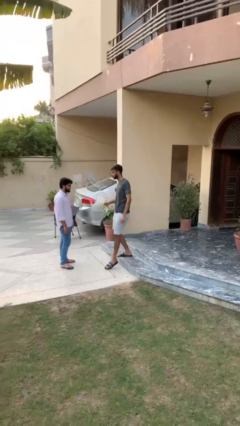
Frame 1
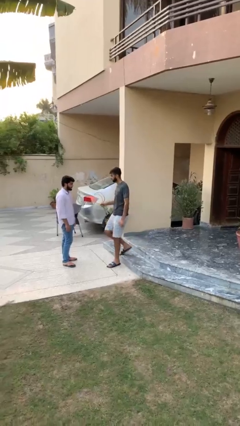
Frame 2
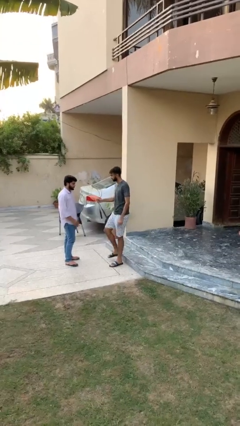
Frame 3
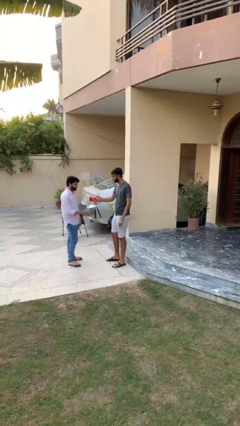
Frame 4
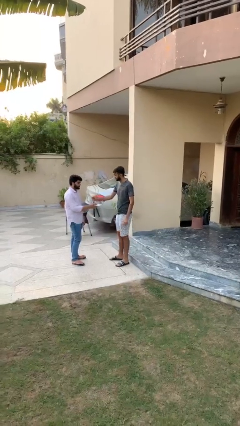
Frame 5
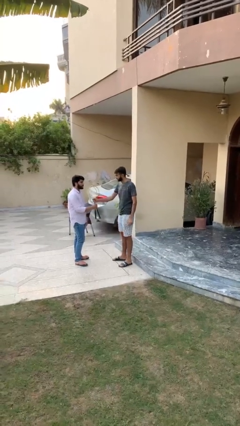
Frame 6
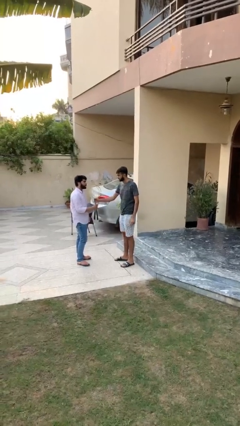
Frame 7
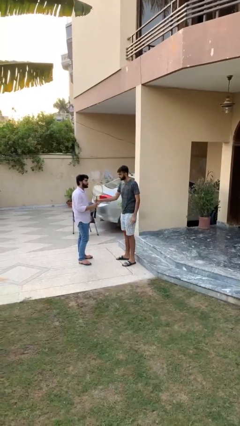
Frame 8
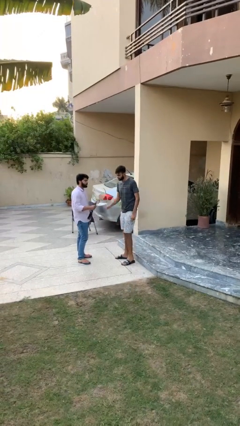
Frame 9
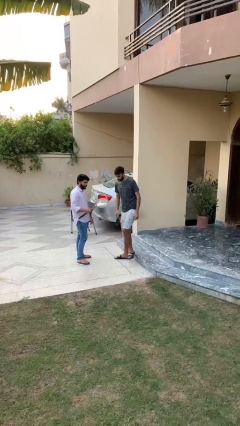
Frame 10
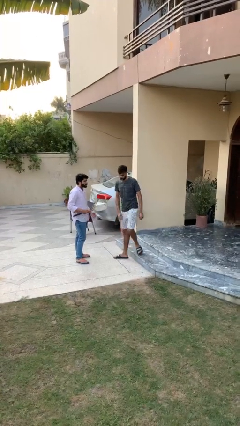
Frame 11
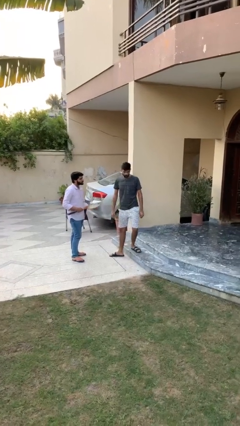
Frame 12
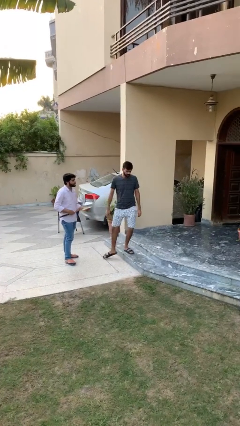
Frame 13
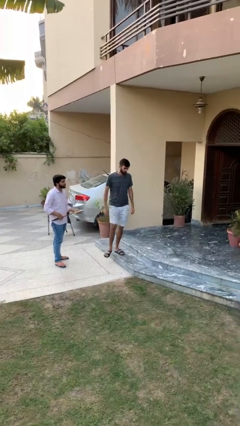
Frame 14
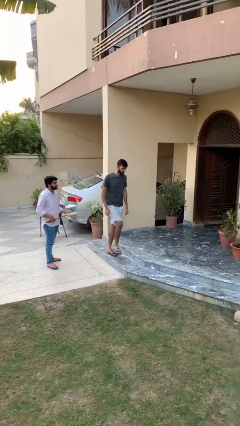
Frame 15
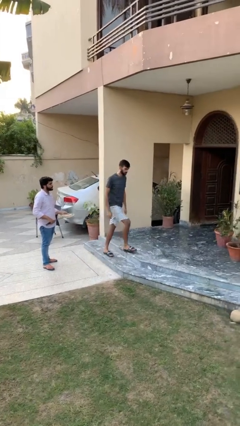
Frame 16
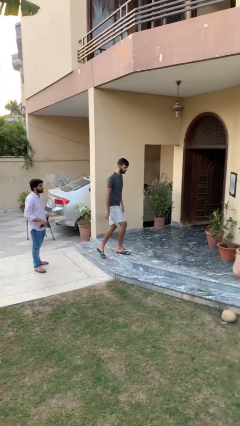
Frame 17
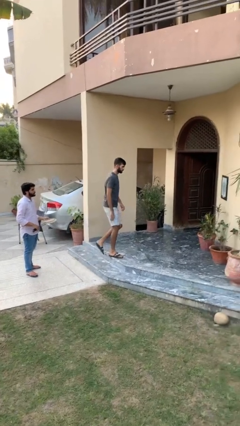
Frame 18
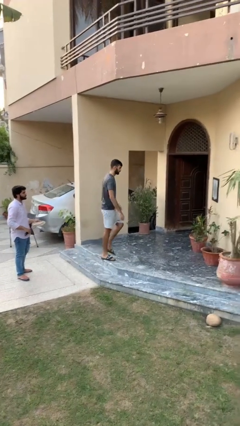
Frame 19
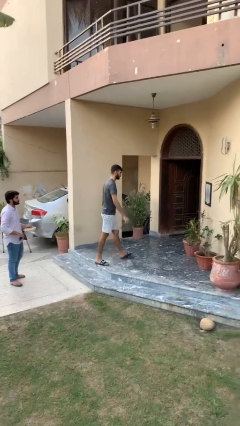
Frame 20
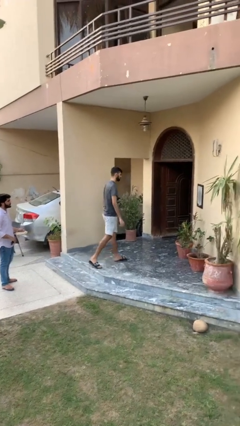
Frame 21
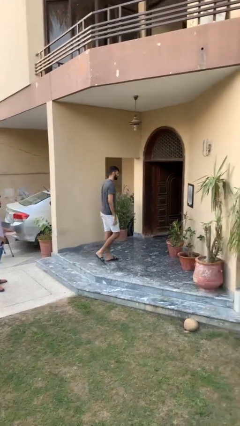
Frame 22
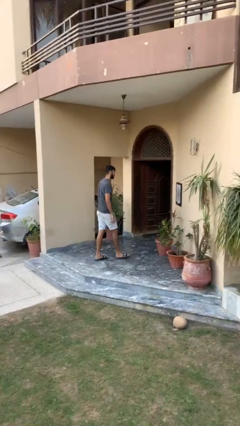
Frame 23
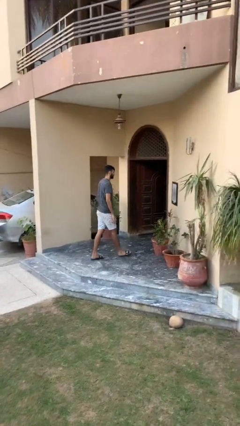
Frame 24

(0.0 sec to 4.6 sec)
person transfers object to person

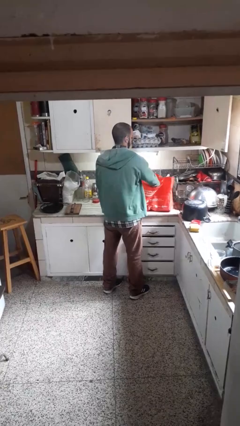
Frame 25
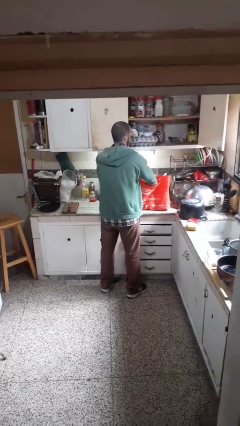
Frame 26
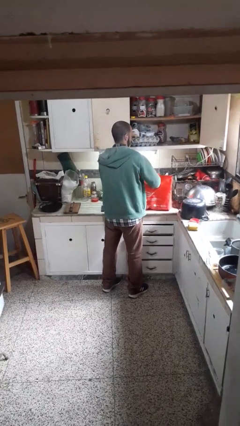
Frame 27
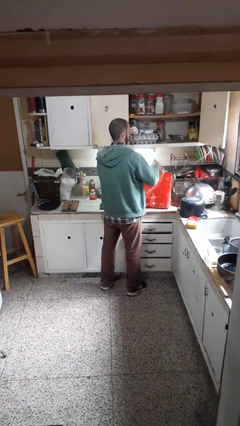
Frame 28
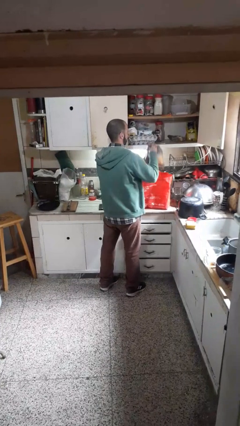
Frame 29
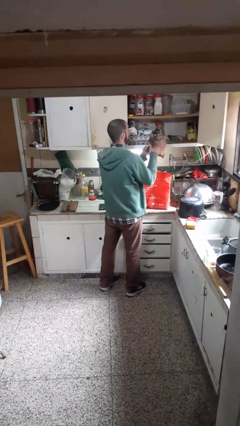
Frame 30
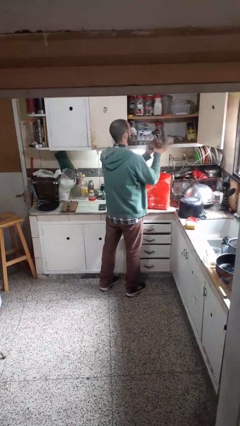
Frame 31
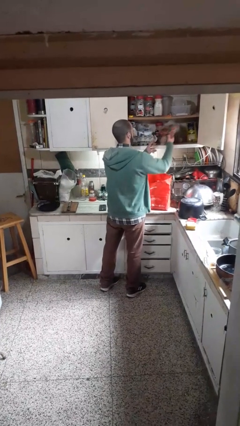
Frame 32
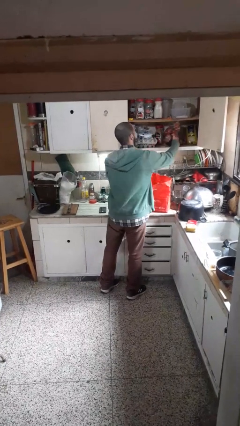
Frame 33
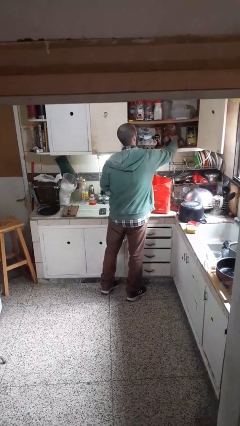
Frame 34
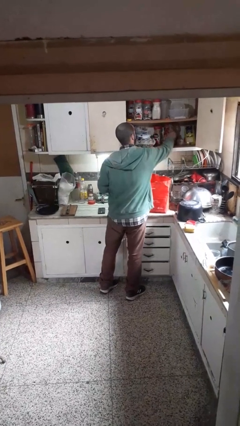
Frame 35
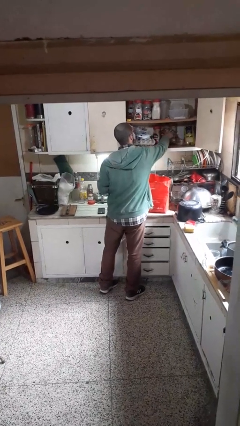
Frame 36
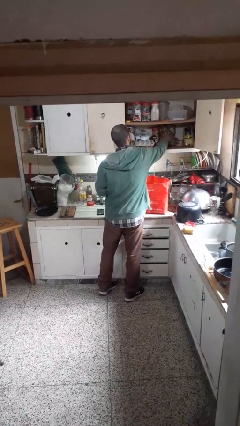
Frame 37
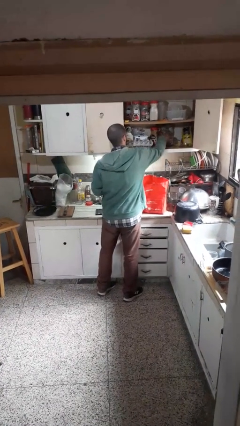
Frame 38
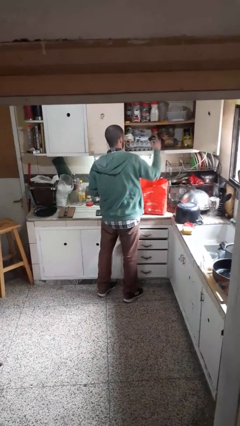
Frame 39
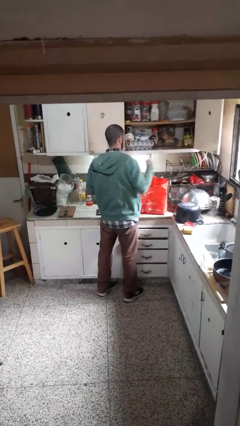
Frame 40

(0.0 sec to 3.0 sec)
person loads groceries into cabinet

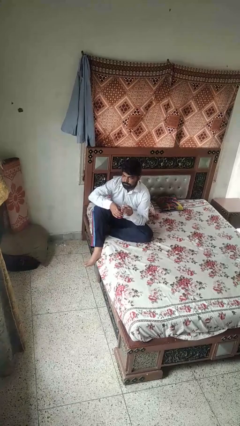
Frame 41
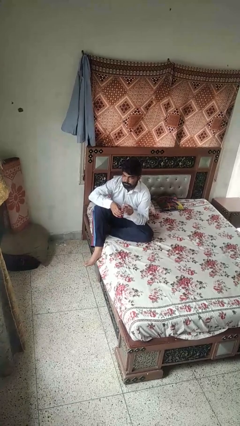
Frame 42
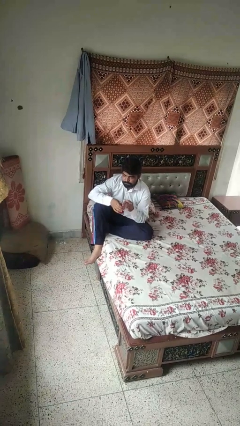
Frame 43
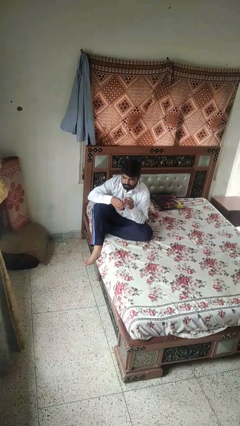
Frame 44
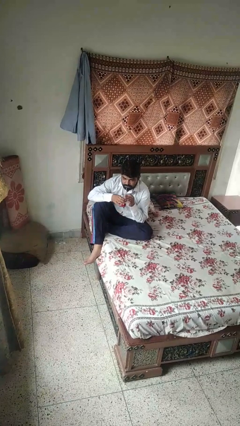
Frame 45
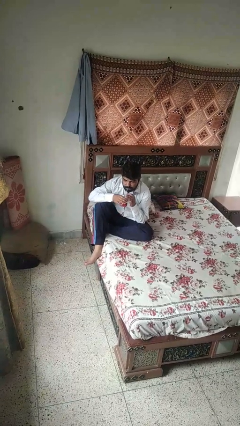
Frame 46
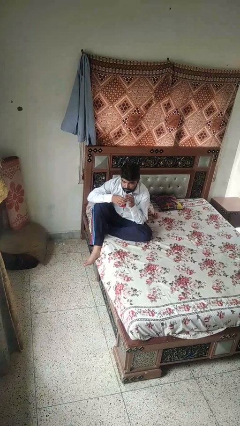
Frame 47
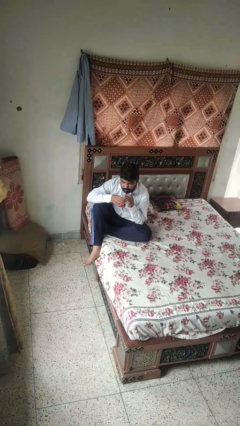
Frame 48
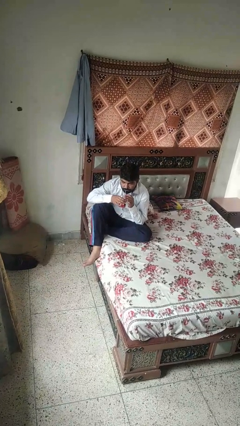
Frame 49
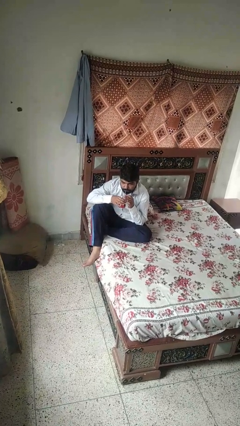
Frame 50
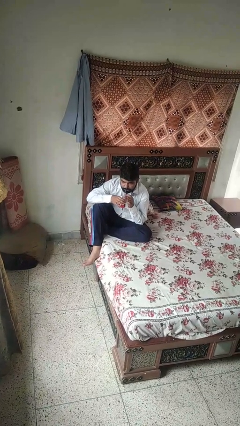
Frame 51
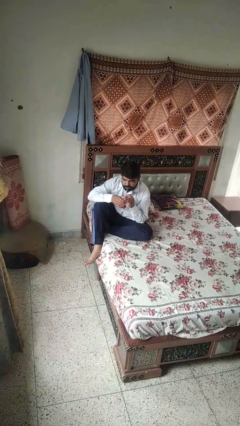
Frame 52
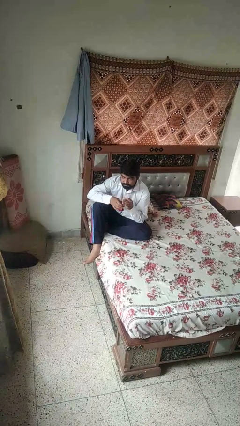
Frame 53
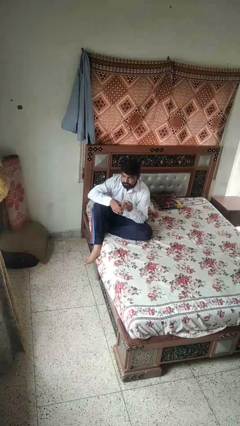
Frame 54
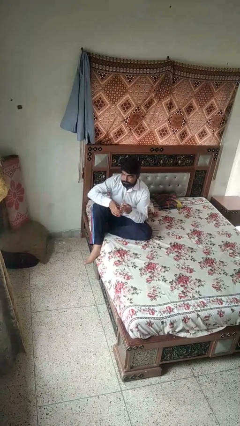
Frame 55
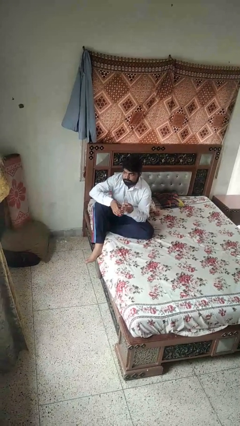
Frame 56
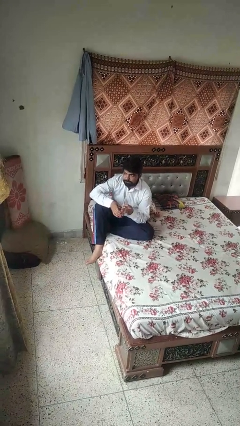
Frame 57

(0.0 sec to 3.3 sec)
person drinks from straw

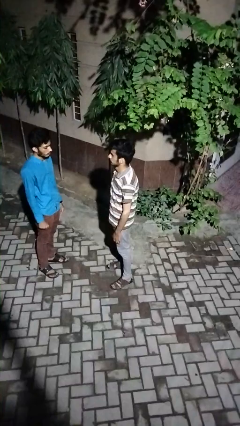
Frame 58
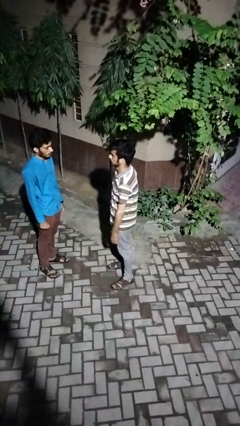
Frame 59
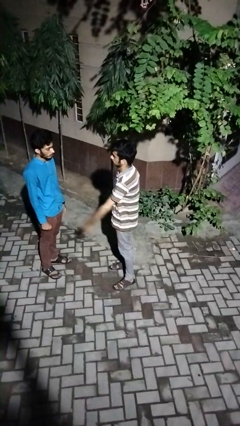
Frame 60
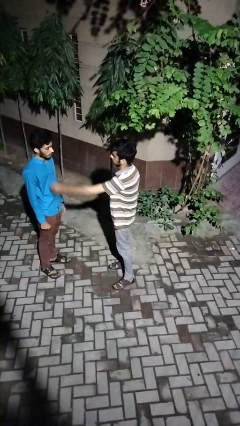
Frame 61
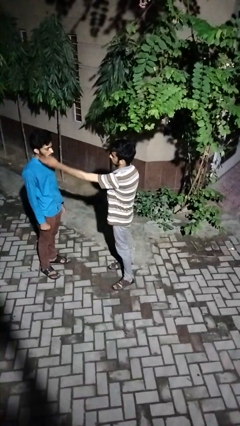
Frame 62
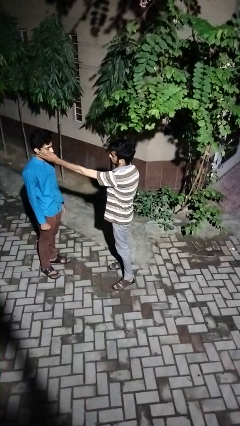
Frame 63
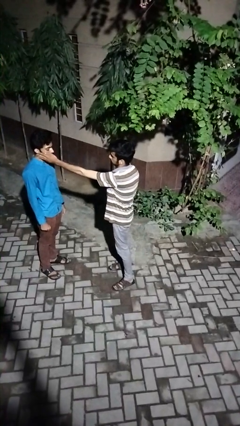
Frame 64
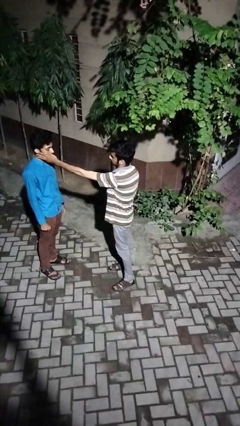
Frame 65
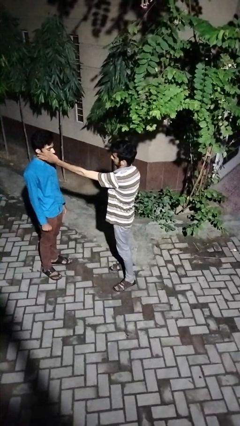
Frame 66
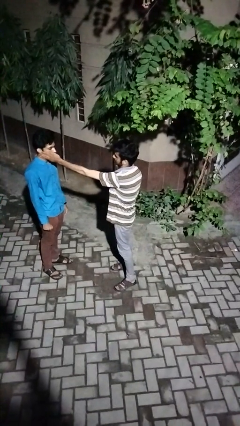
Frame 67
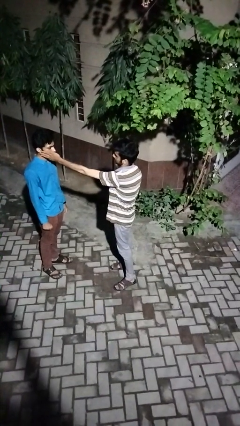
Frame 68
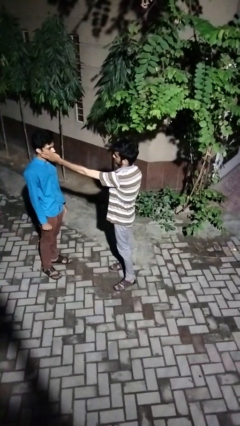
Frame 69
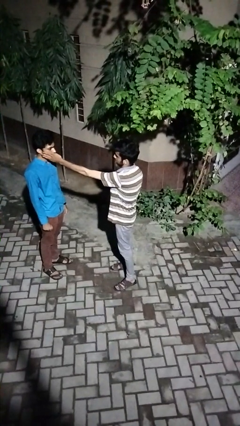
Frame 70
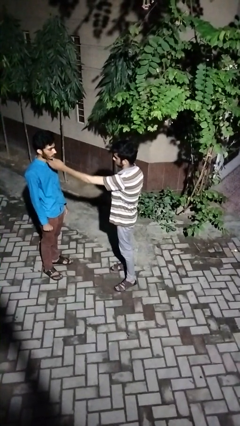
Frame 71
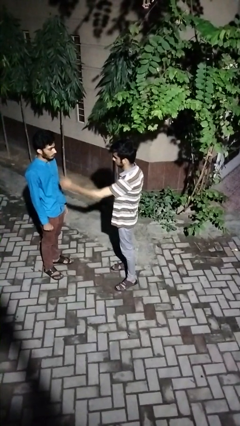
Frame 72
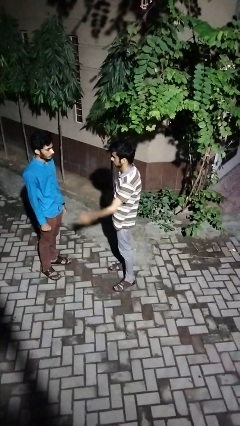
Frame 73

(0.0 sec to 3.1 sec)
person touches face of person

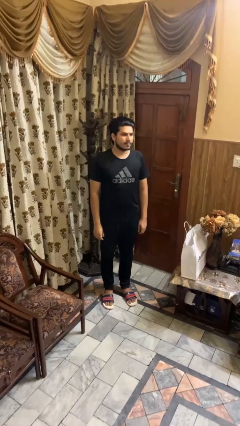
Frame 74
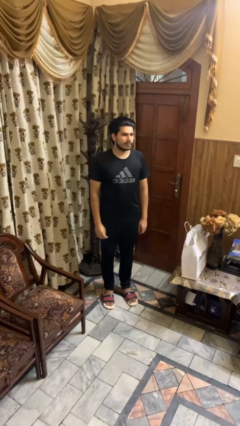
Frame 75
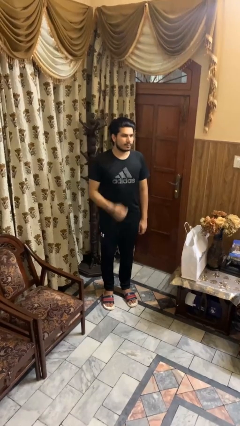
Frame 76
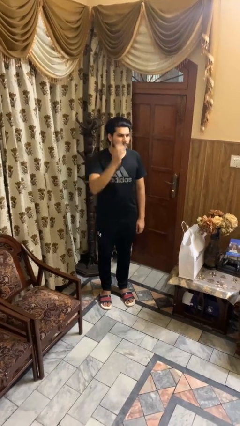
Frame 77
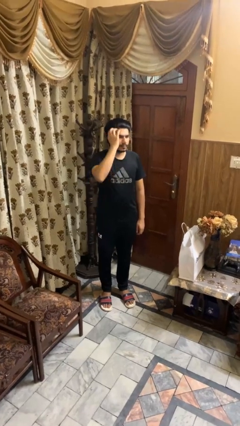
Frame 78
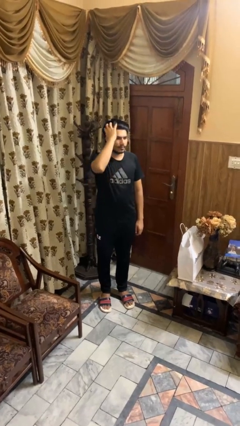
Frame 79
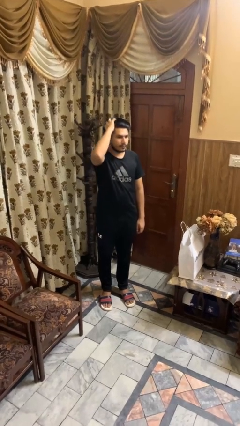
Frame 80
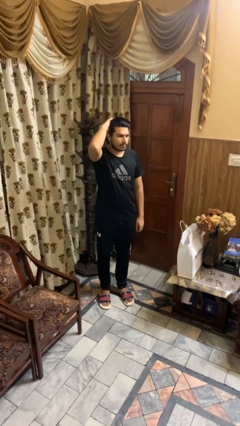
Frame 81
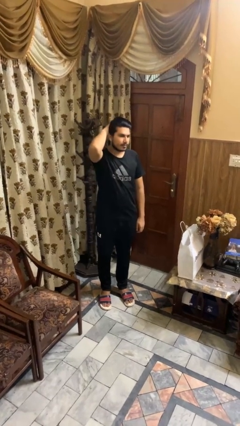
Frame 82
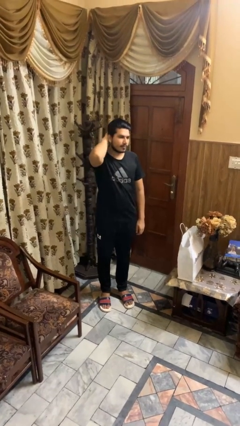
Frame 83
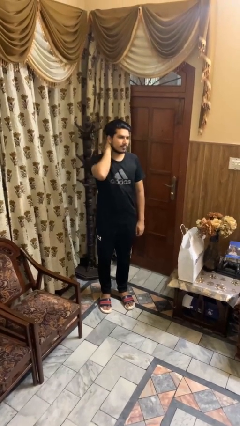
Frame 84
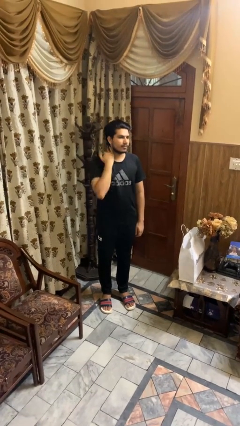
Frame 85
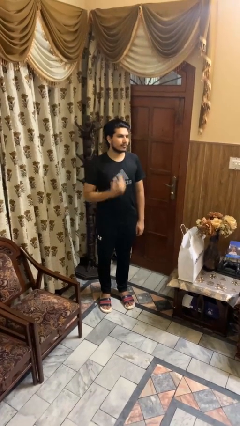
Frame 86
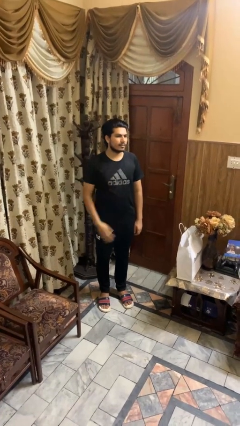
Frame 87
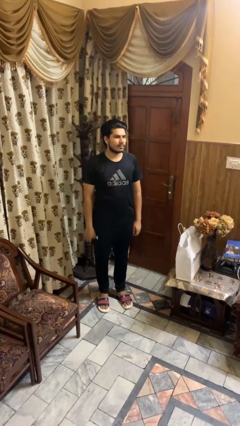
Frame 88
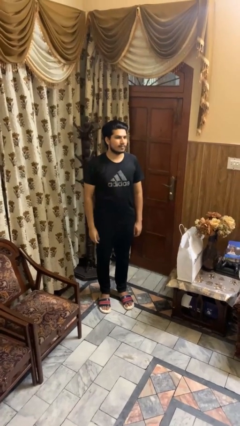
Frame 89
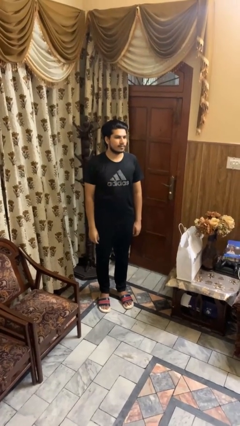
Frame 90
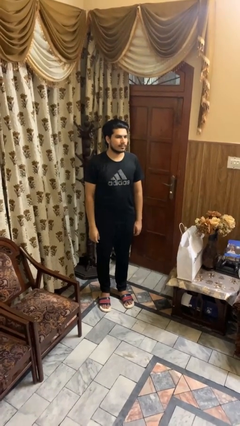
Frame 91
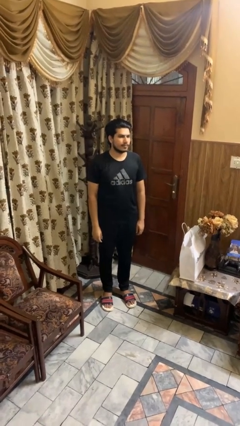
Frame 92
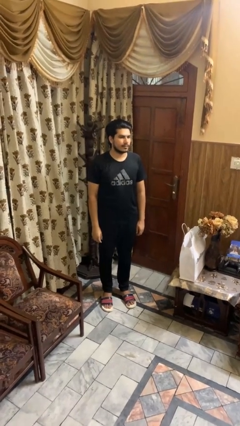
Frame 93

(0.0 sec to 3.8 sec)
person strokes hair
